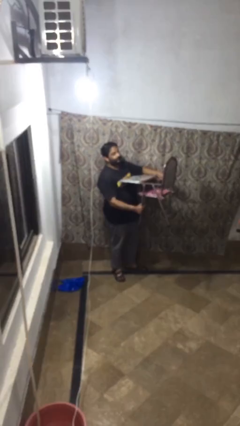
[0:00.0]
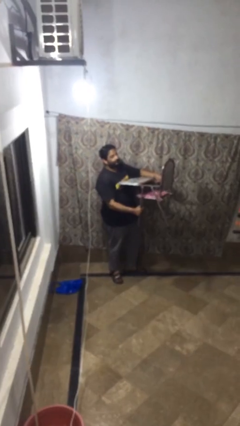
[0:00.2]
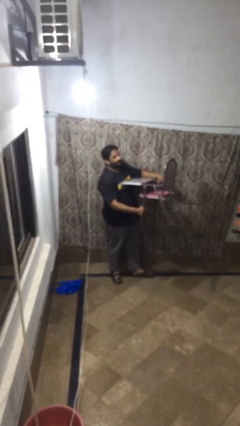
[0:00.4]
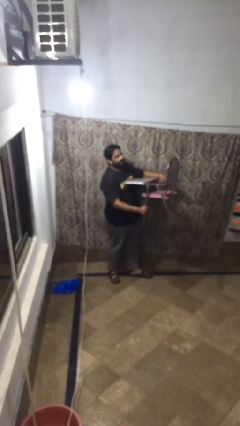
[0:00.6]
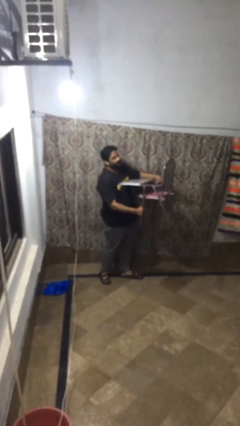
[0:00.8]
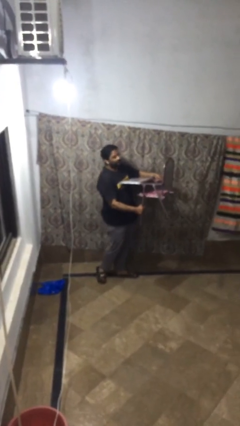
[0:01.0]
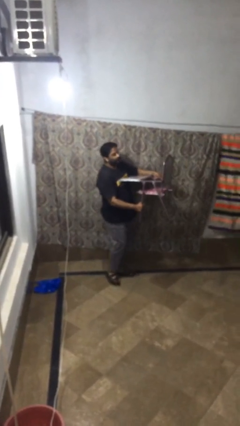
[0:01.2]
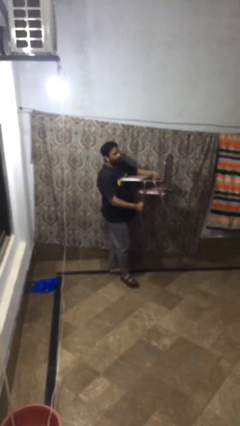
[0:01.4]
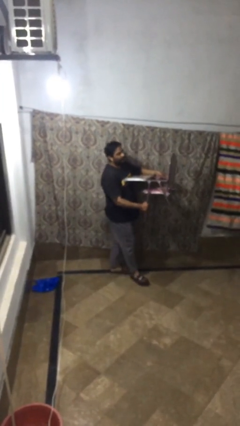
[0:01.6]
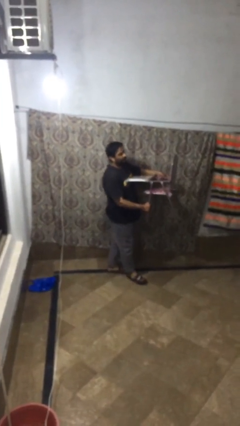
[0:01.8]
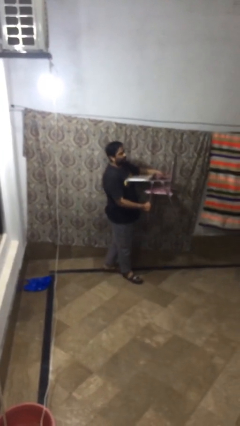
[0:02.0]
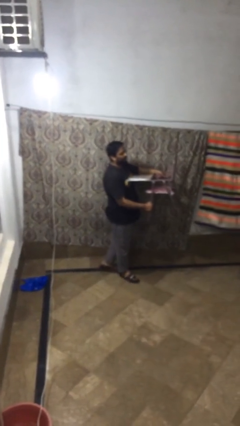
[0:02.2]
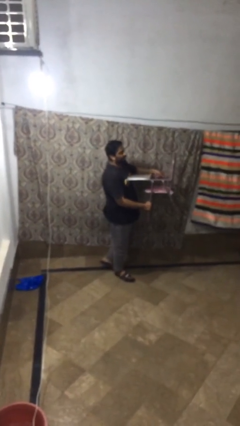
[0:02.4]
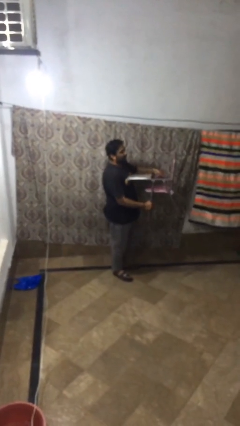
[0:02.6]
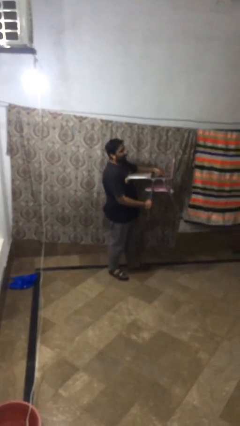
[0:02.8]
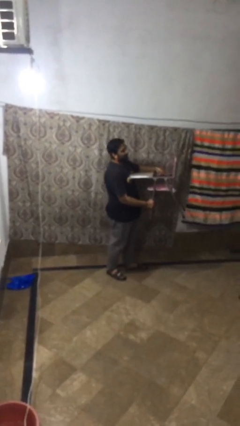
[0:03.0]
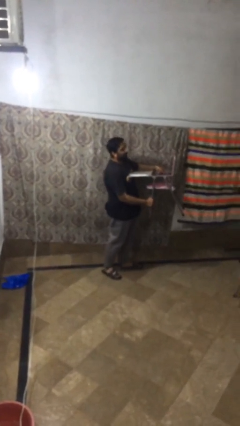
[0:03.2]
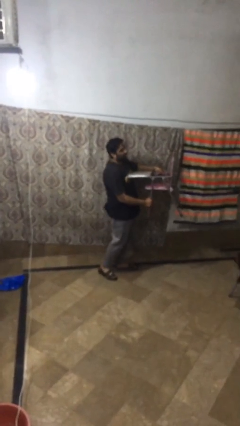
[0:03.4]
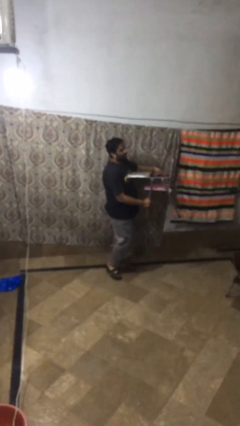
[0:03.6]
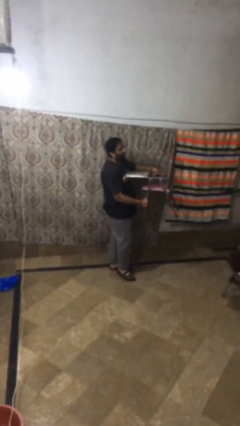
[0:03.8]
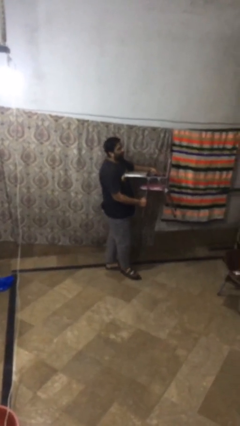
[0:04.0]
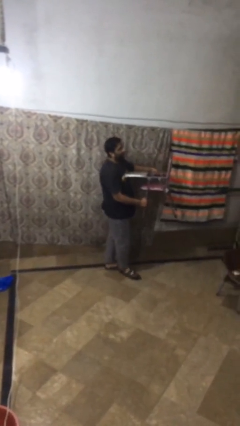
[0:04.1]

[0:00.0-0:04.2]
person carries heavy object

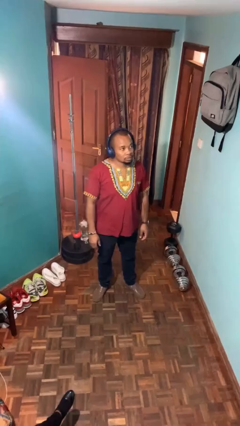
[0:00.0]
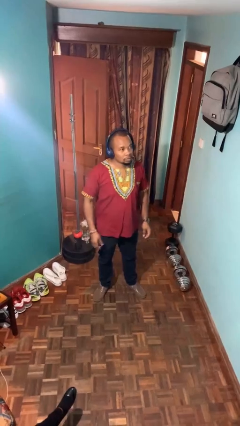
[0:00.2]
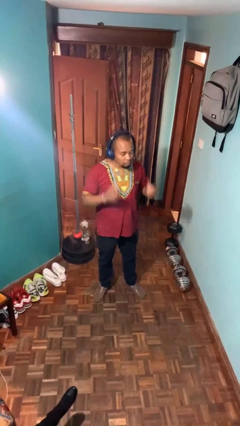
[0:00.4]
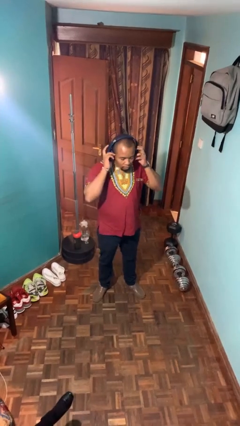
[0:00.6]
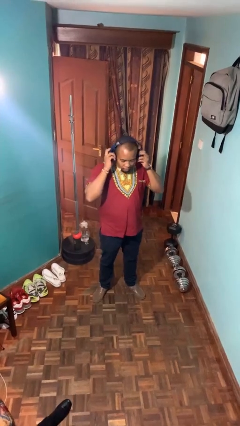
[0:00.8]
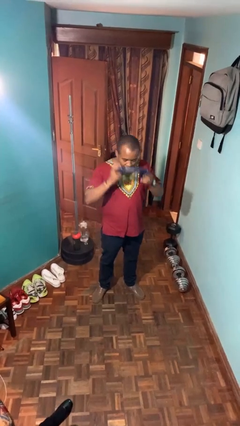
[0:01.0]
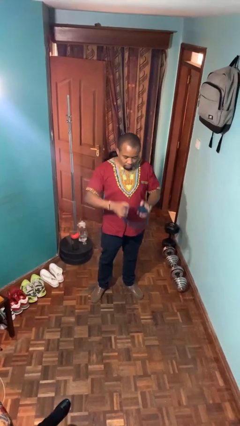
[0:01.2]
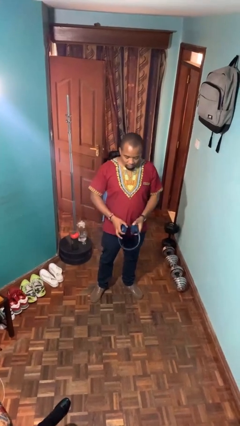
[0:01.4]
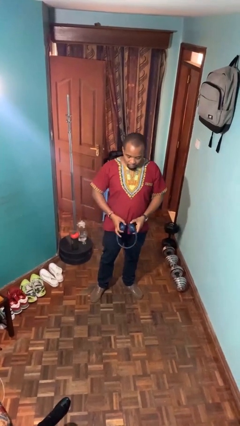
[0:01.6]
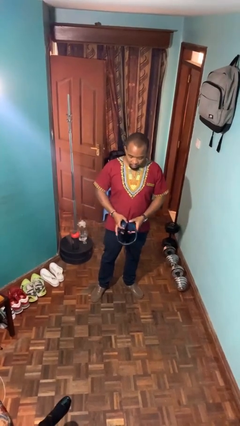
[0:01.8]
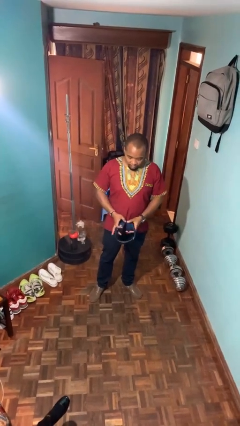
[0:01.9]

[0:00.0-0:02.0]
person takes off headphones

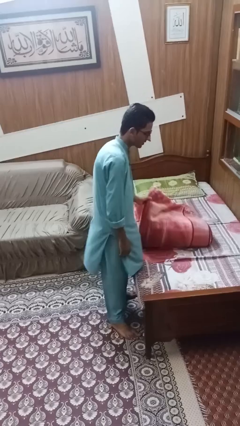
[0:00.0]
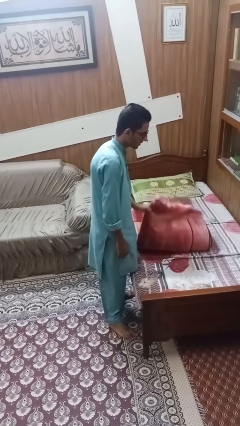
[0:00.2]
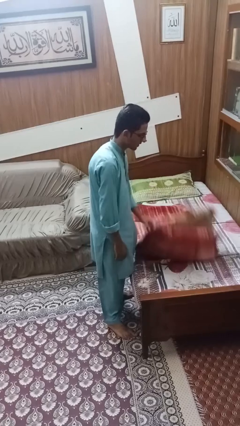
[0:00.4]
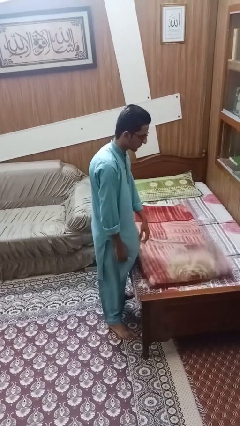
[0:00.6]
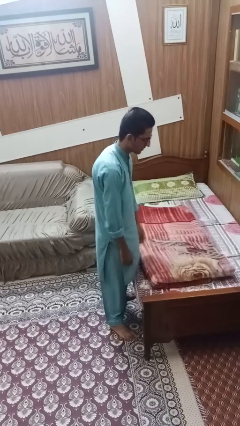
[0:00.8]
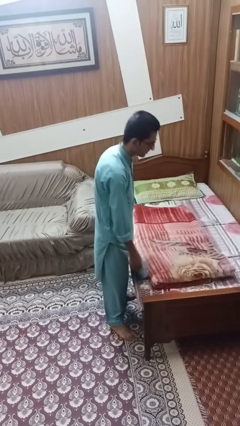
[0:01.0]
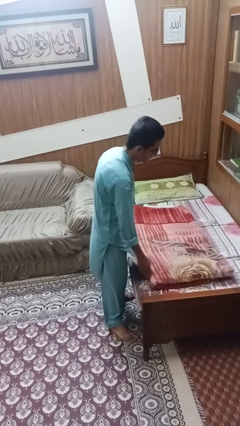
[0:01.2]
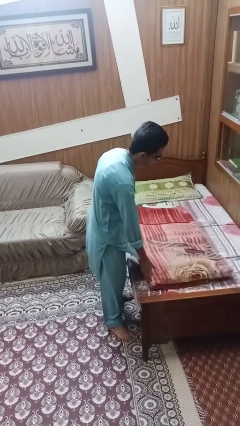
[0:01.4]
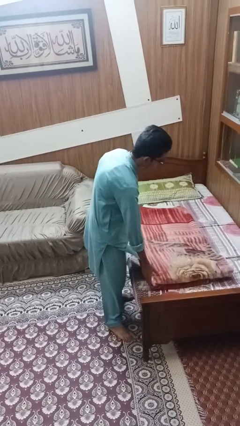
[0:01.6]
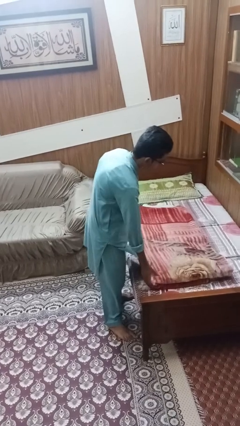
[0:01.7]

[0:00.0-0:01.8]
person unfolds blanket

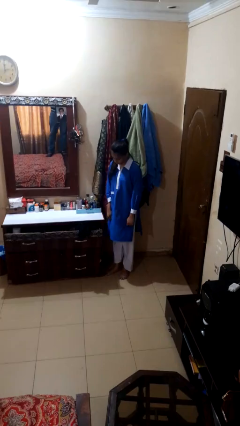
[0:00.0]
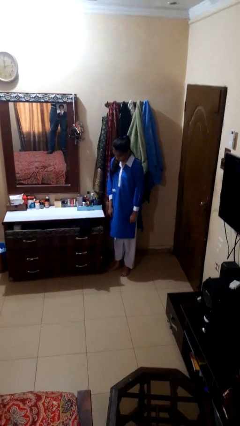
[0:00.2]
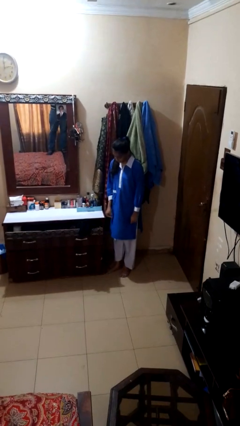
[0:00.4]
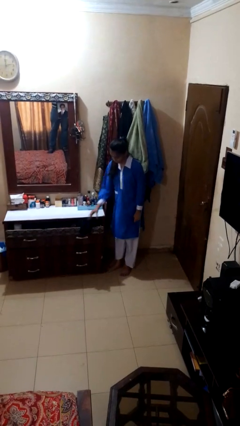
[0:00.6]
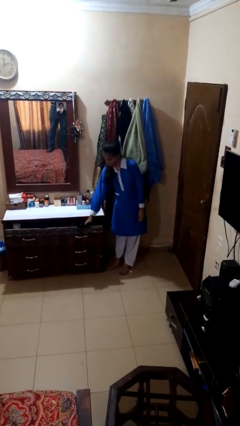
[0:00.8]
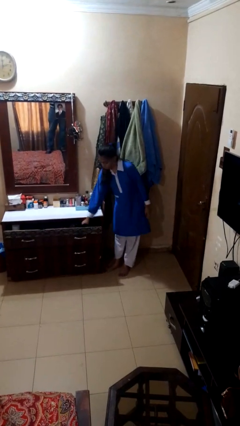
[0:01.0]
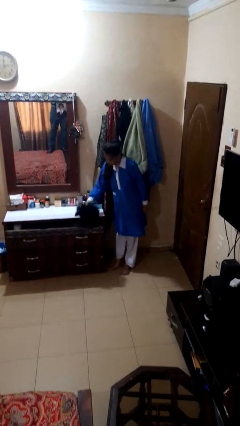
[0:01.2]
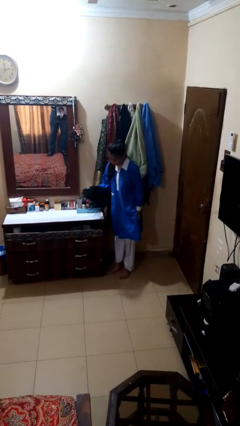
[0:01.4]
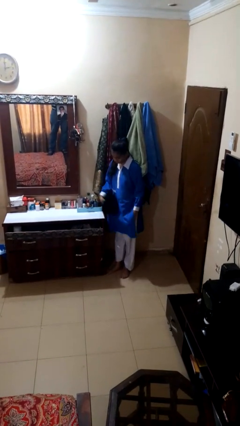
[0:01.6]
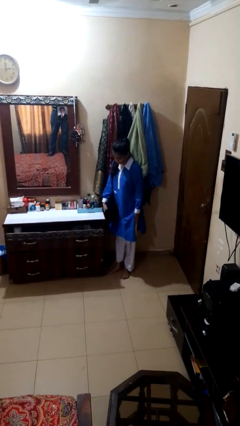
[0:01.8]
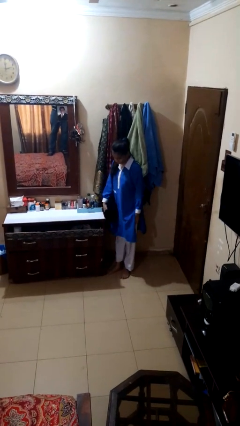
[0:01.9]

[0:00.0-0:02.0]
person takes clothes from dresser

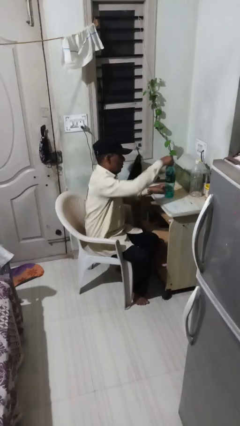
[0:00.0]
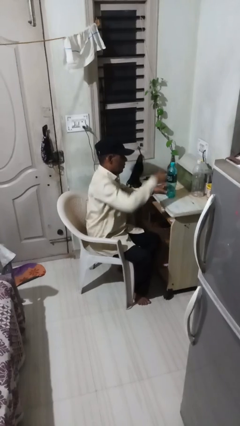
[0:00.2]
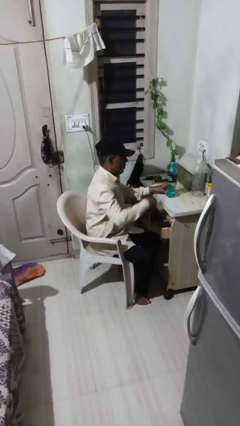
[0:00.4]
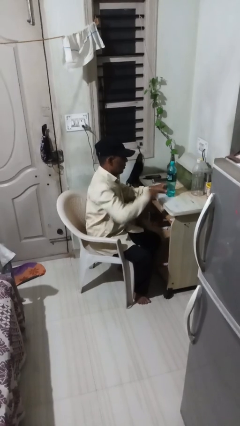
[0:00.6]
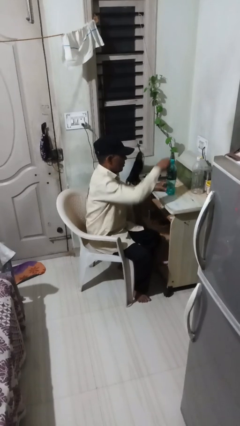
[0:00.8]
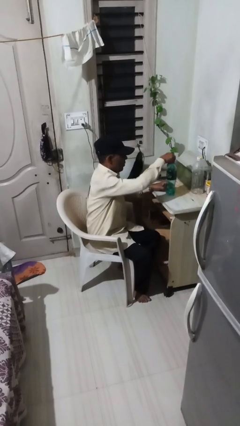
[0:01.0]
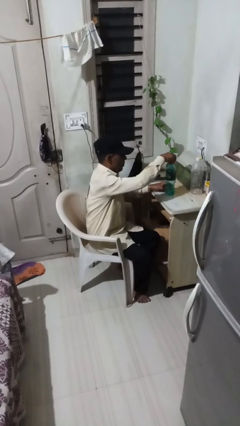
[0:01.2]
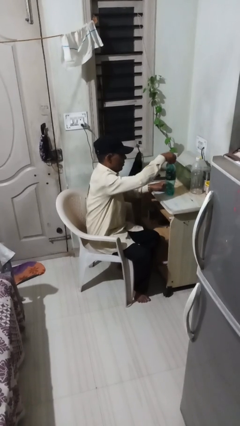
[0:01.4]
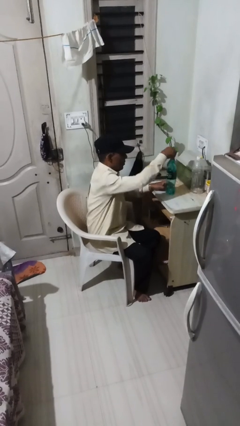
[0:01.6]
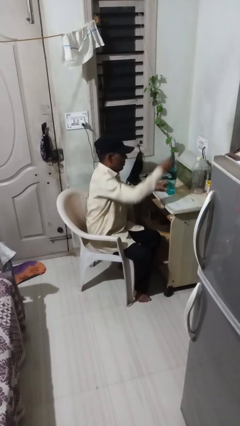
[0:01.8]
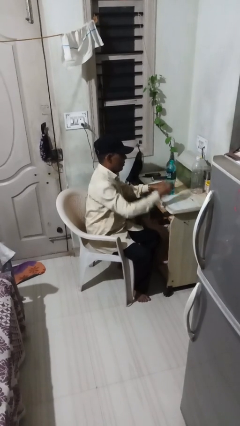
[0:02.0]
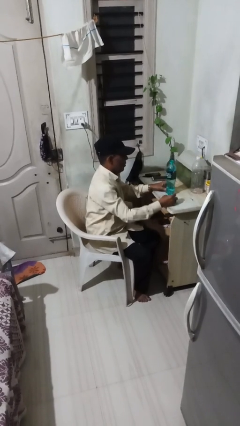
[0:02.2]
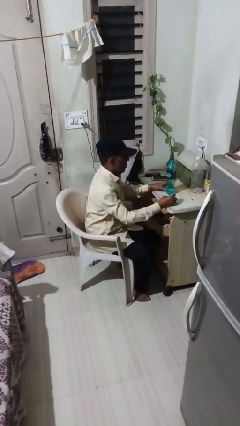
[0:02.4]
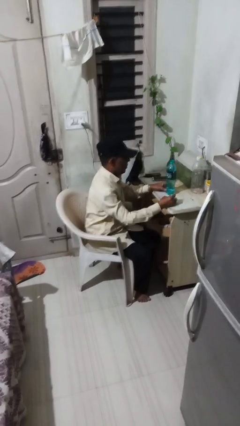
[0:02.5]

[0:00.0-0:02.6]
person unscrews lid from bottle

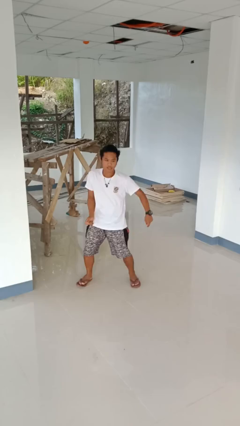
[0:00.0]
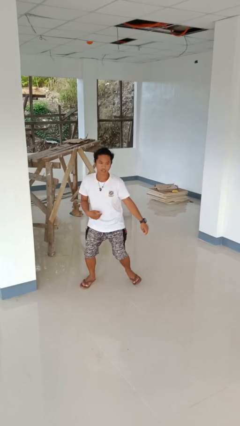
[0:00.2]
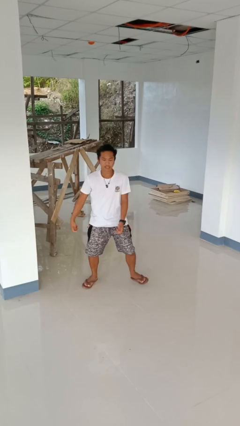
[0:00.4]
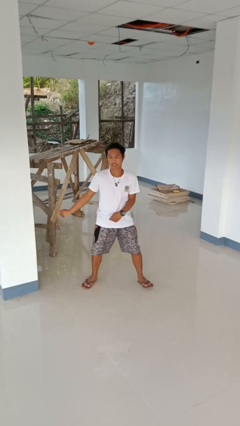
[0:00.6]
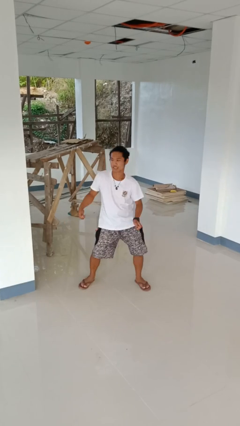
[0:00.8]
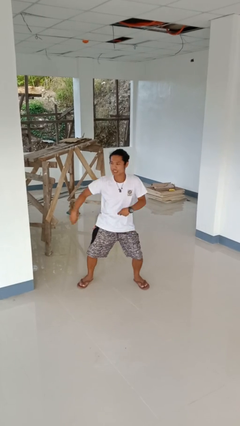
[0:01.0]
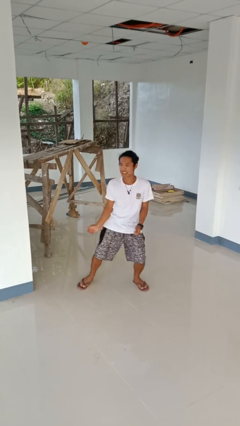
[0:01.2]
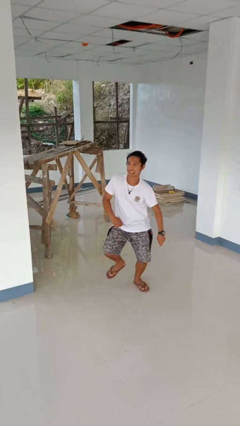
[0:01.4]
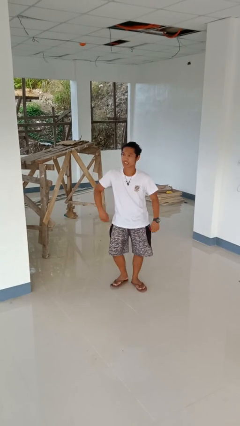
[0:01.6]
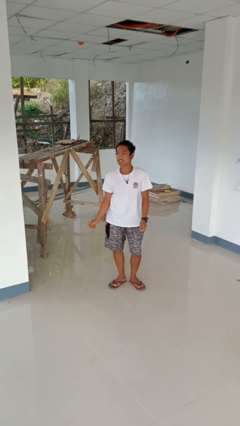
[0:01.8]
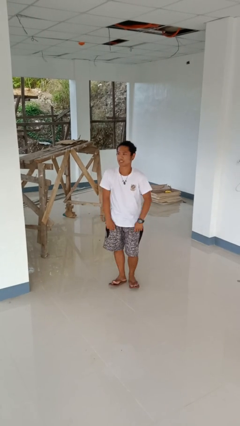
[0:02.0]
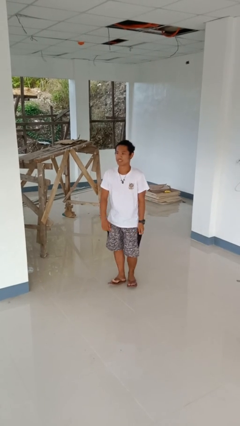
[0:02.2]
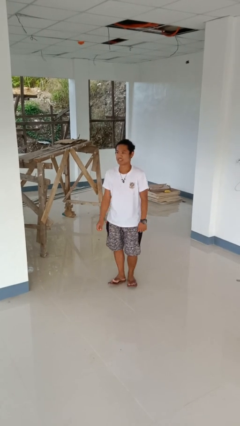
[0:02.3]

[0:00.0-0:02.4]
person dances in place

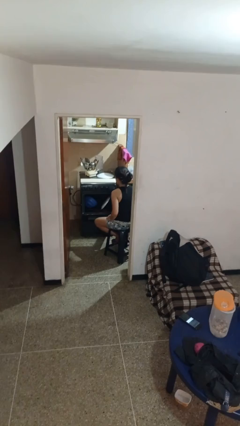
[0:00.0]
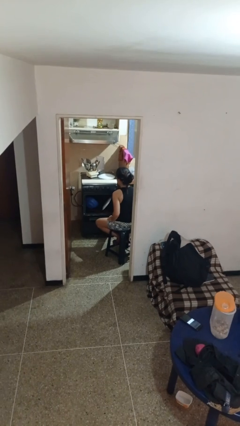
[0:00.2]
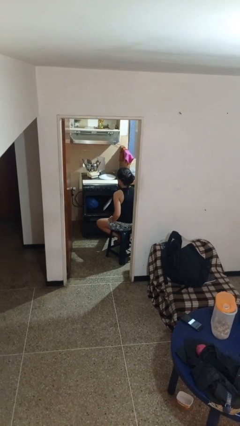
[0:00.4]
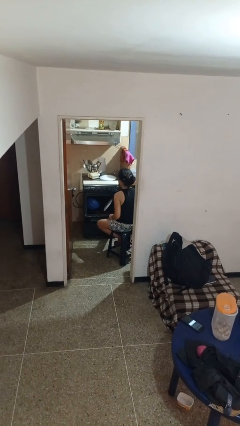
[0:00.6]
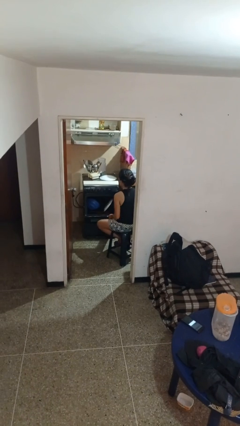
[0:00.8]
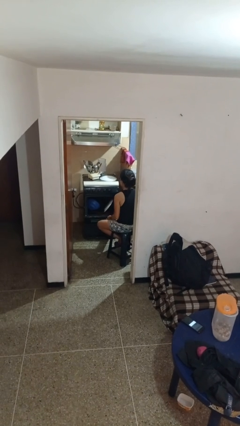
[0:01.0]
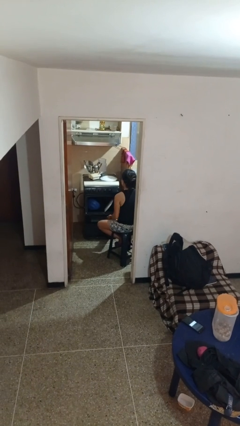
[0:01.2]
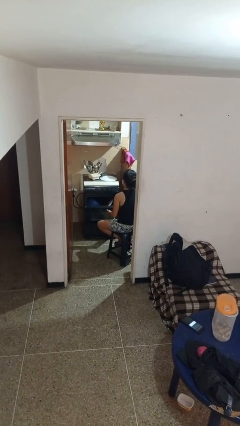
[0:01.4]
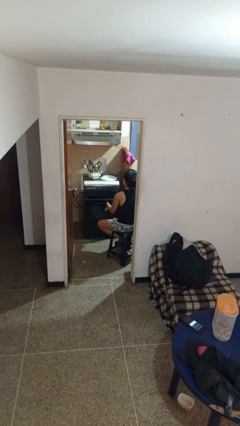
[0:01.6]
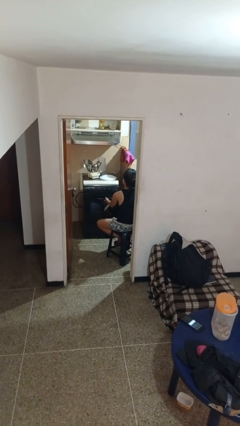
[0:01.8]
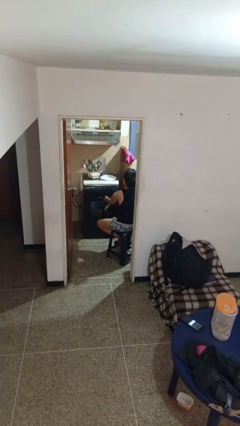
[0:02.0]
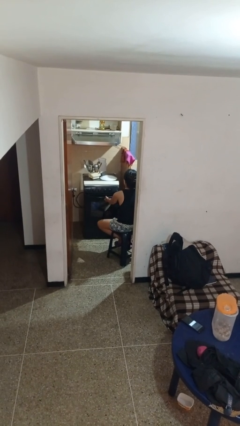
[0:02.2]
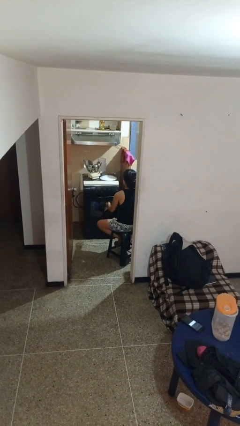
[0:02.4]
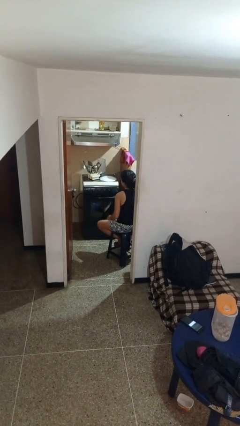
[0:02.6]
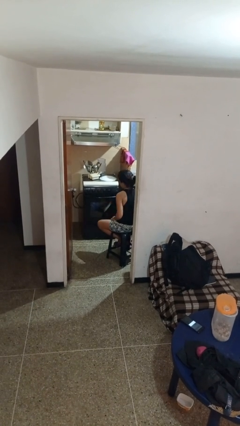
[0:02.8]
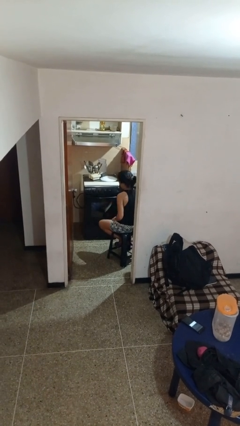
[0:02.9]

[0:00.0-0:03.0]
person closes dishwasher
